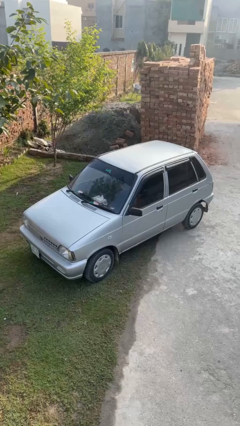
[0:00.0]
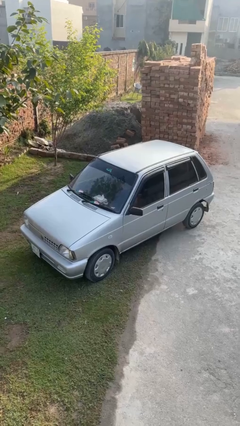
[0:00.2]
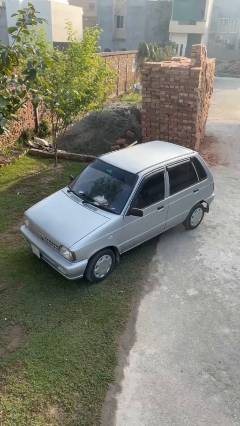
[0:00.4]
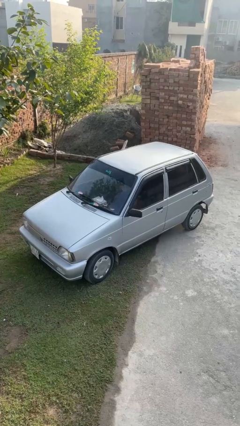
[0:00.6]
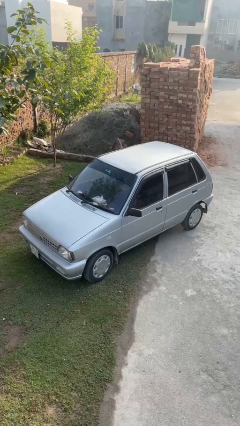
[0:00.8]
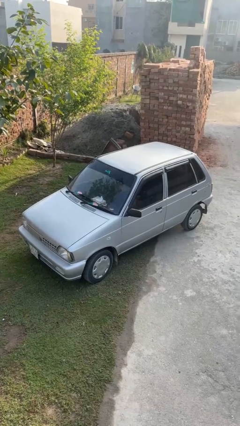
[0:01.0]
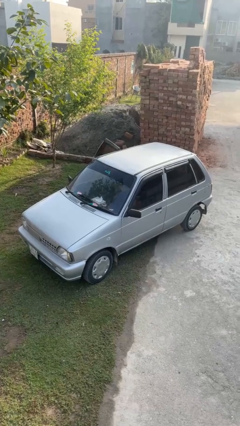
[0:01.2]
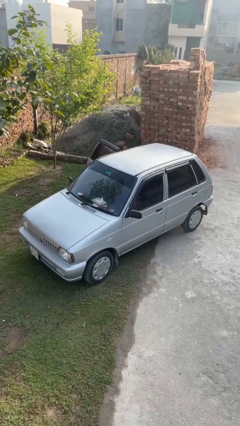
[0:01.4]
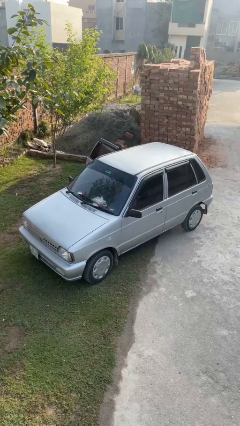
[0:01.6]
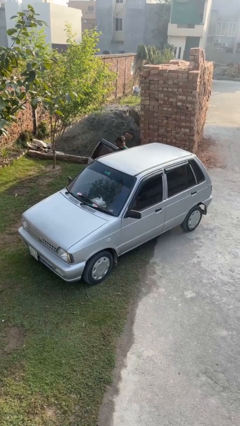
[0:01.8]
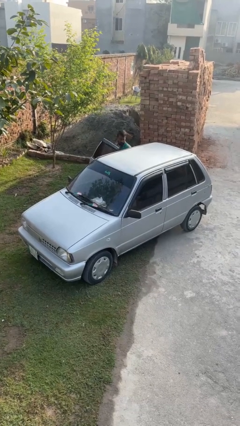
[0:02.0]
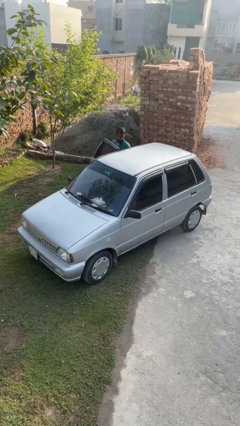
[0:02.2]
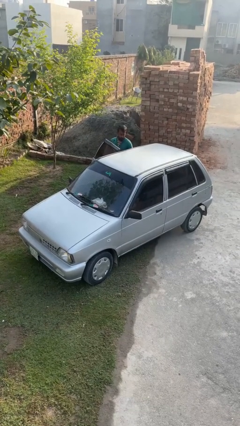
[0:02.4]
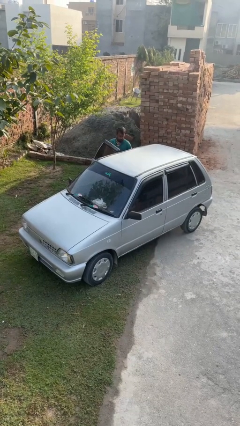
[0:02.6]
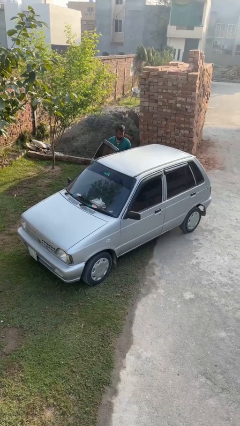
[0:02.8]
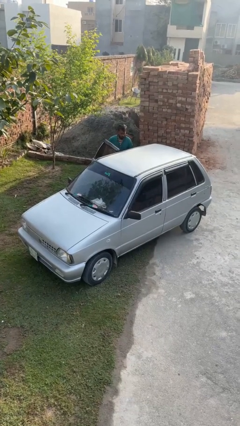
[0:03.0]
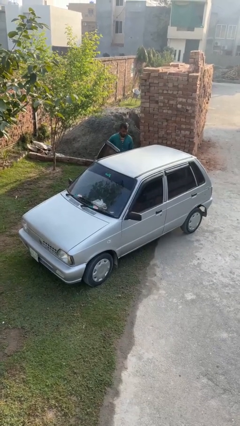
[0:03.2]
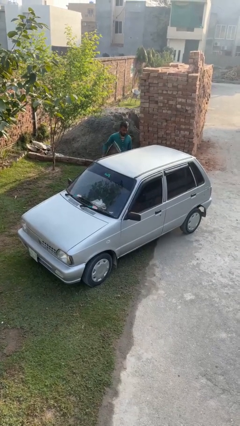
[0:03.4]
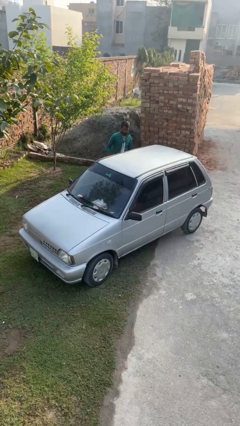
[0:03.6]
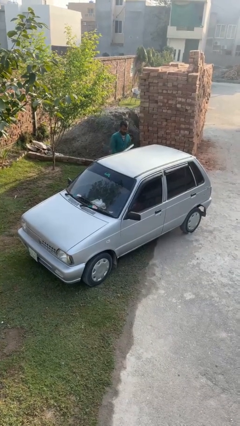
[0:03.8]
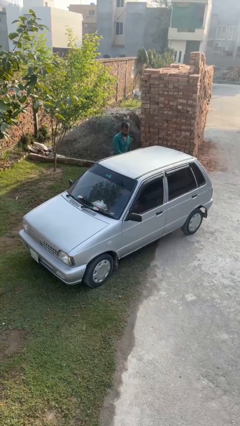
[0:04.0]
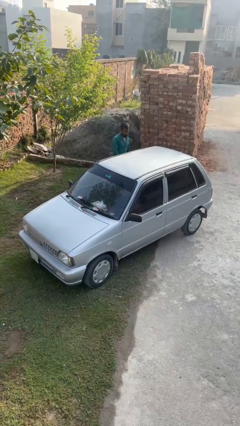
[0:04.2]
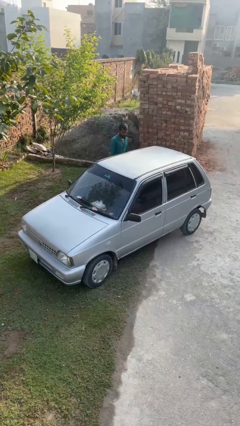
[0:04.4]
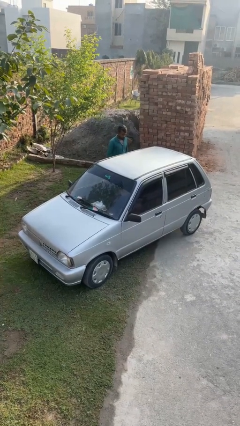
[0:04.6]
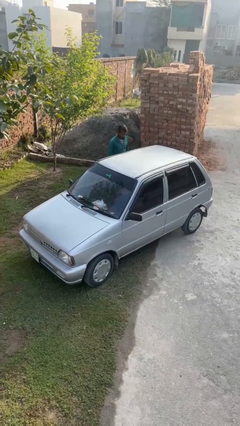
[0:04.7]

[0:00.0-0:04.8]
car drops off person

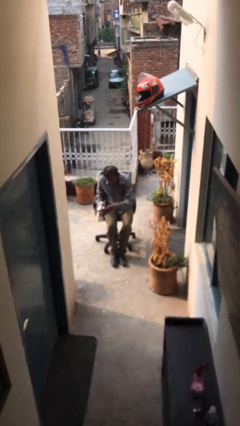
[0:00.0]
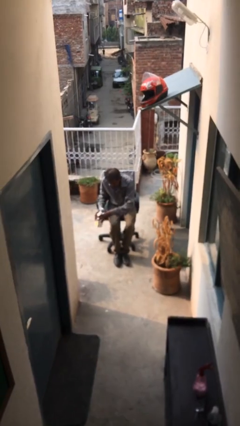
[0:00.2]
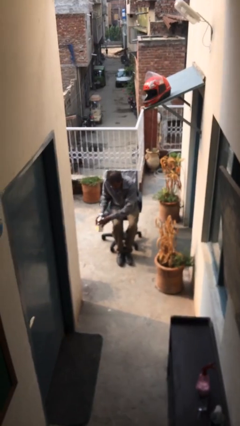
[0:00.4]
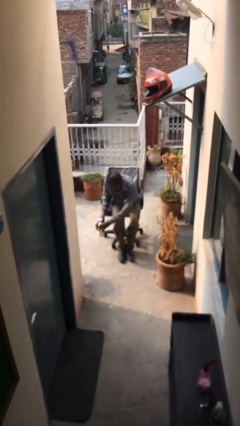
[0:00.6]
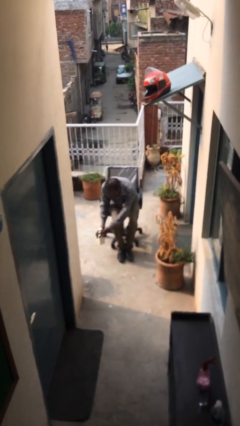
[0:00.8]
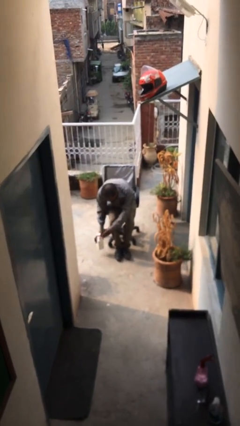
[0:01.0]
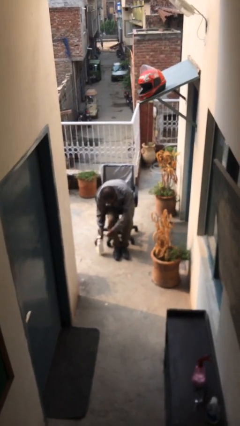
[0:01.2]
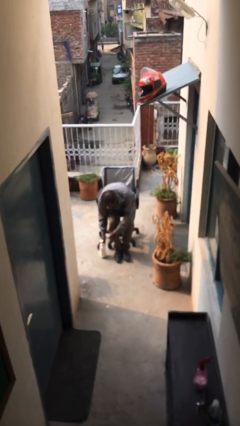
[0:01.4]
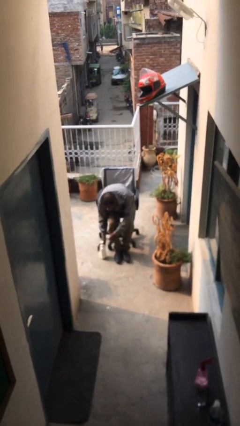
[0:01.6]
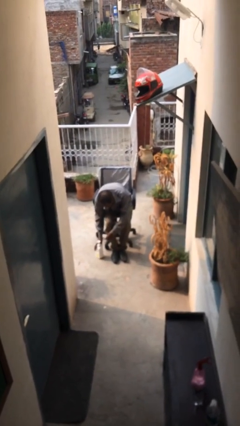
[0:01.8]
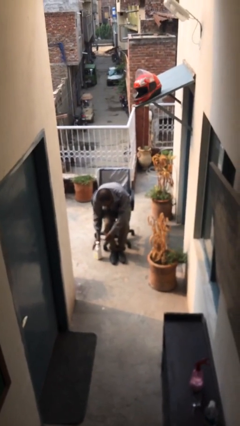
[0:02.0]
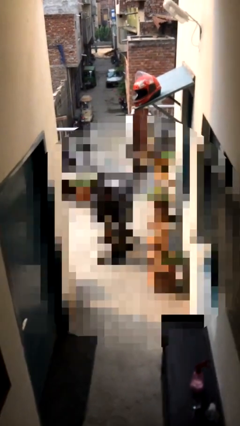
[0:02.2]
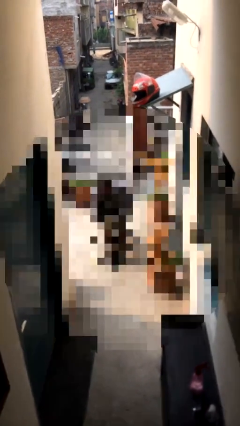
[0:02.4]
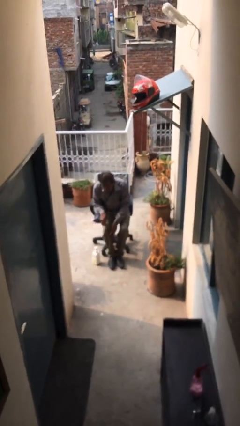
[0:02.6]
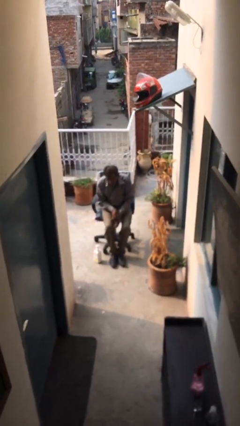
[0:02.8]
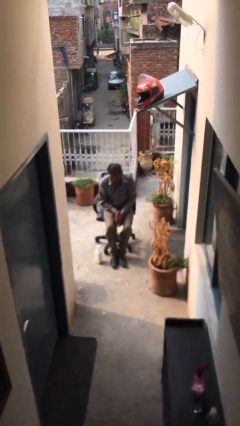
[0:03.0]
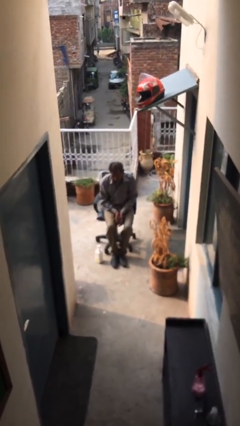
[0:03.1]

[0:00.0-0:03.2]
person puts down object on floor

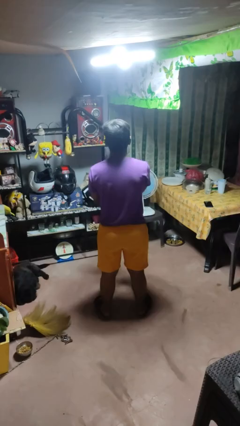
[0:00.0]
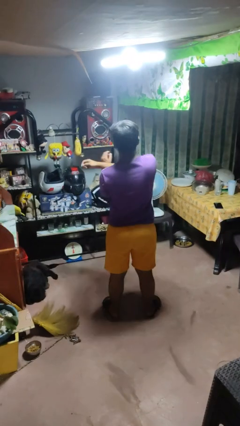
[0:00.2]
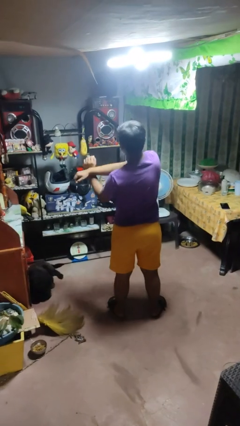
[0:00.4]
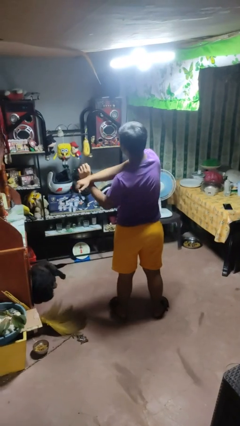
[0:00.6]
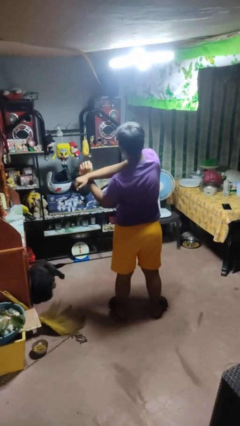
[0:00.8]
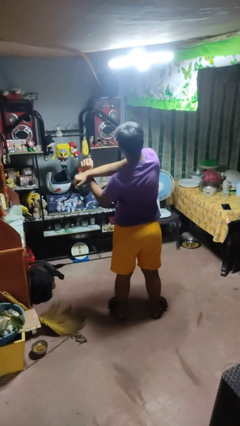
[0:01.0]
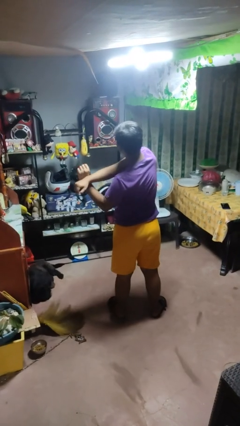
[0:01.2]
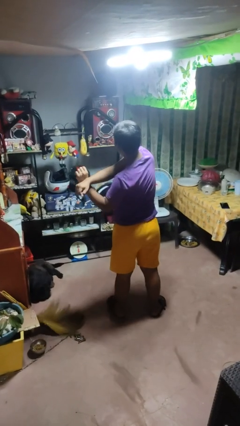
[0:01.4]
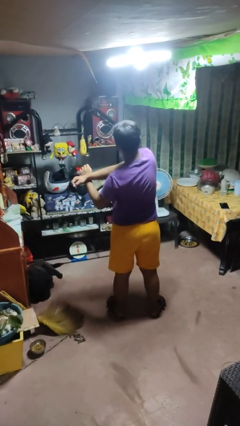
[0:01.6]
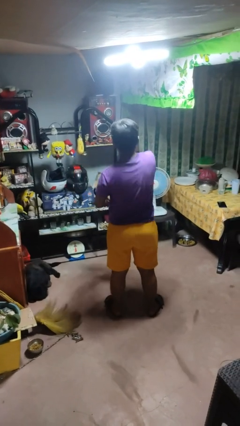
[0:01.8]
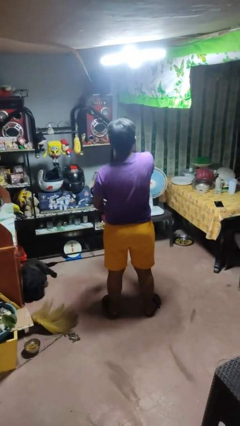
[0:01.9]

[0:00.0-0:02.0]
person crosses arms

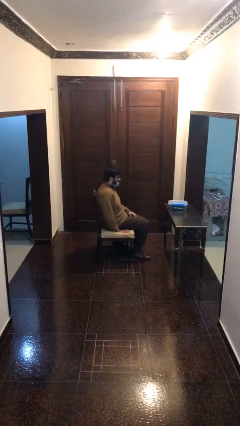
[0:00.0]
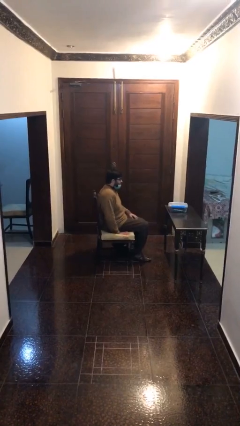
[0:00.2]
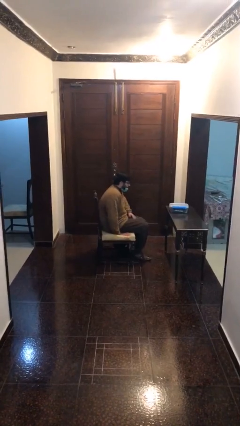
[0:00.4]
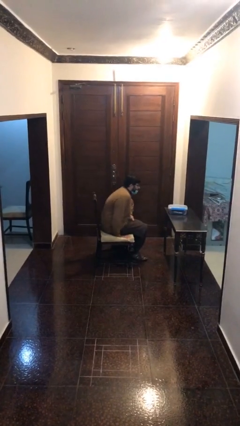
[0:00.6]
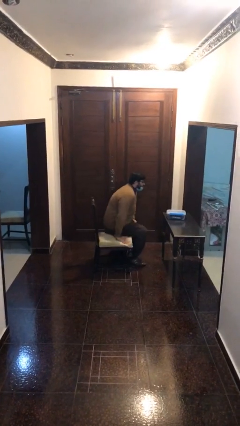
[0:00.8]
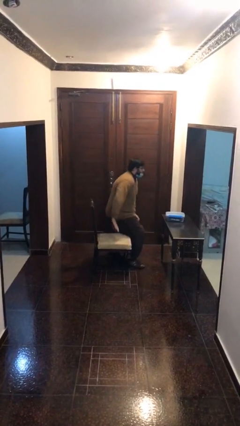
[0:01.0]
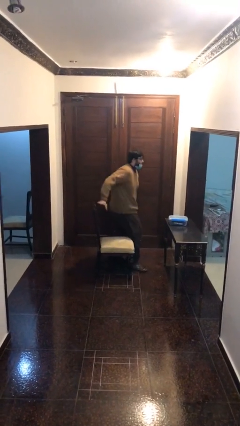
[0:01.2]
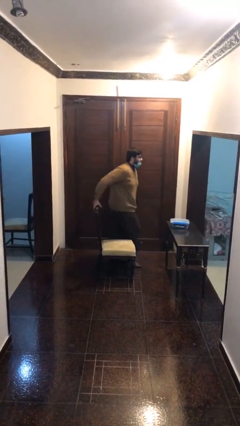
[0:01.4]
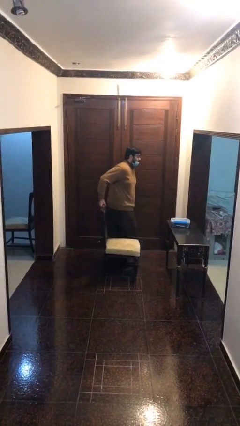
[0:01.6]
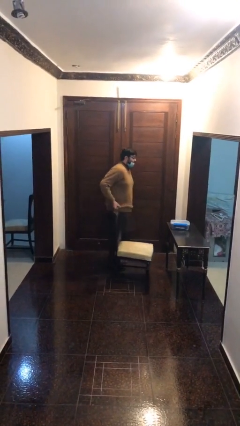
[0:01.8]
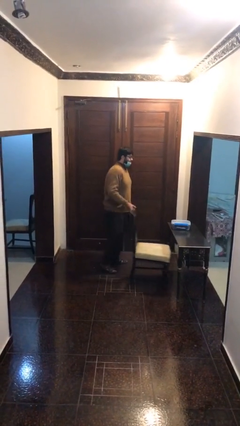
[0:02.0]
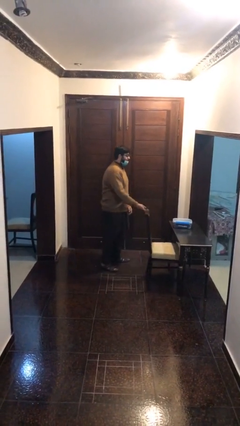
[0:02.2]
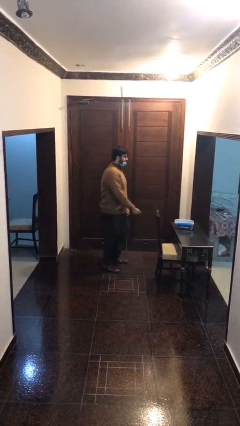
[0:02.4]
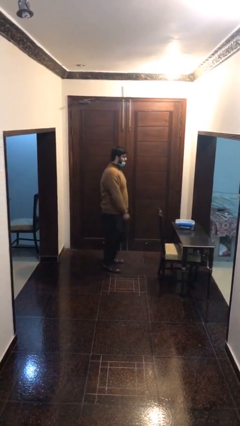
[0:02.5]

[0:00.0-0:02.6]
person stands up

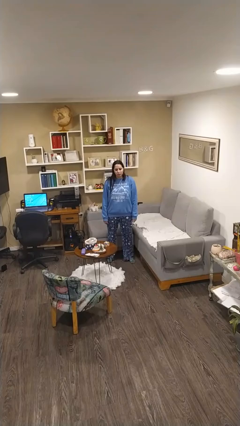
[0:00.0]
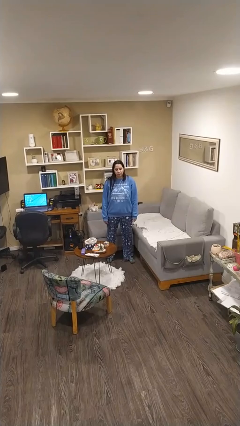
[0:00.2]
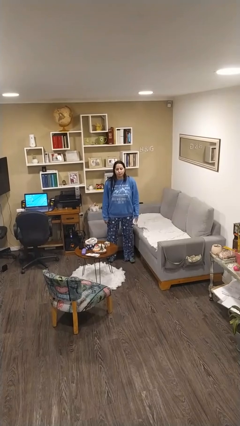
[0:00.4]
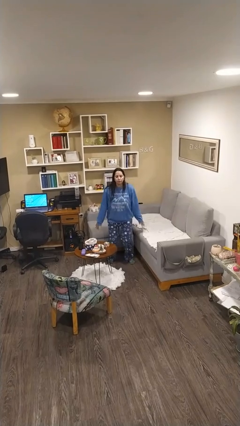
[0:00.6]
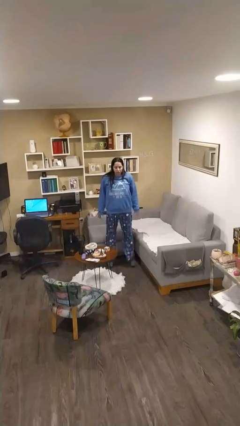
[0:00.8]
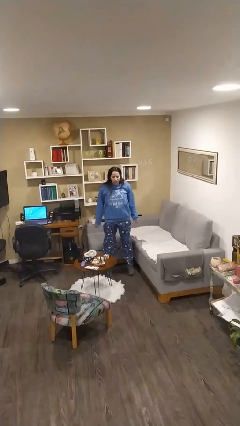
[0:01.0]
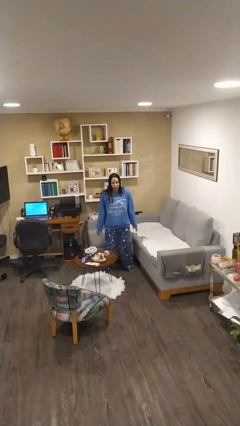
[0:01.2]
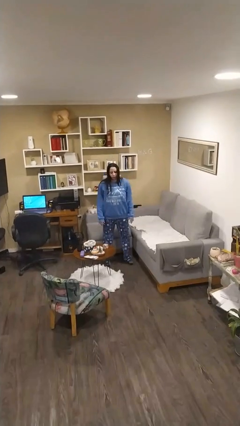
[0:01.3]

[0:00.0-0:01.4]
person jumps

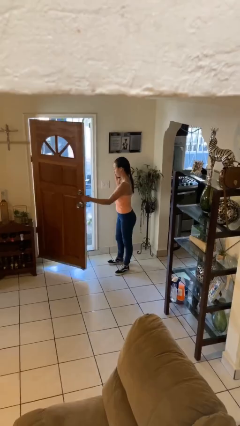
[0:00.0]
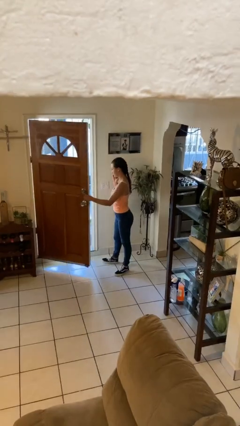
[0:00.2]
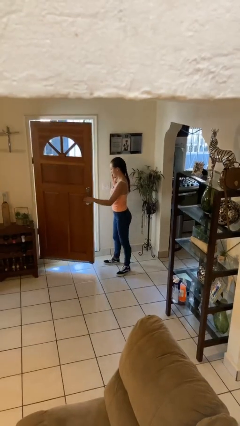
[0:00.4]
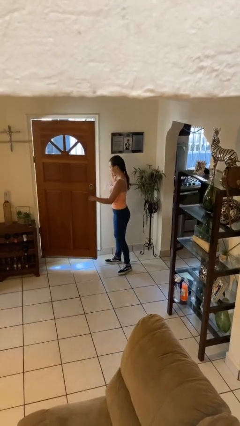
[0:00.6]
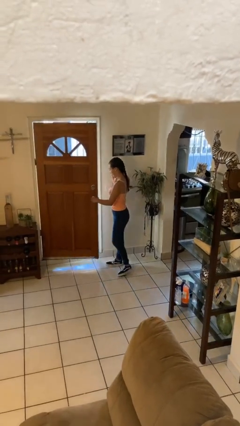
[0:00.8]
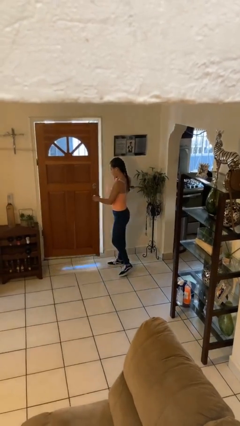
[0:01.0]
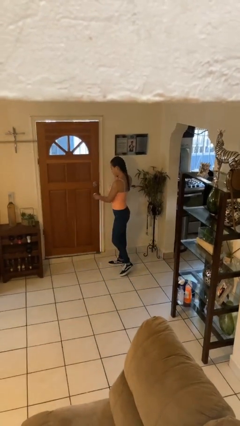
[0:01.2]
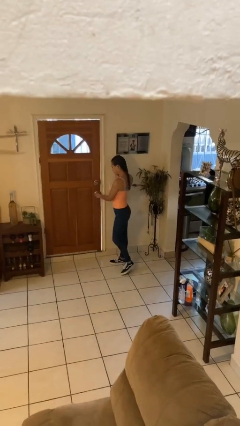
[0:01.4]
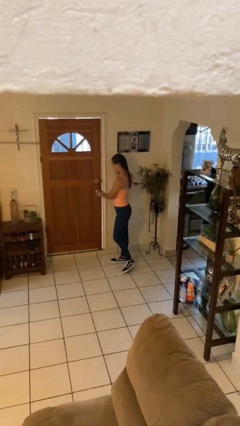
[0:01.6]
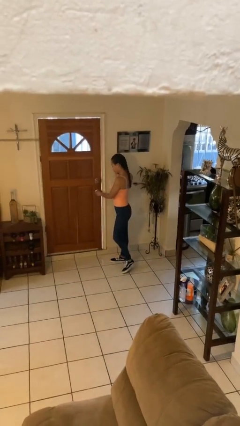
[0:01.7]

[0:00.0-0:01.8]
person closes facility door

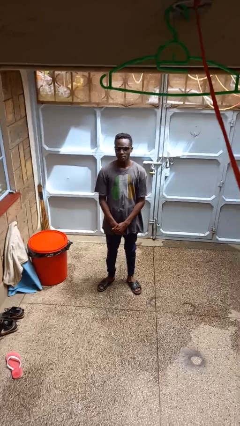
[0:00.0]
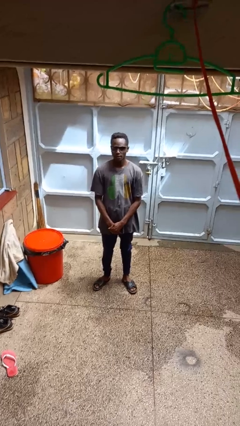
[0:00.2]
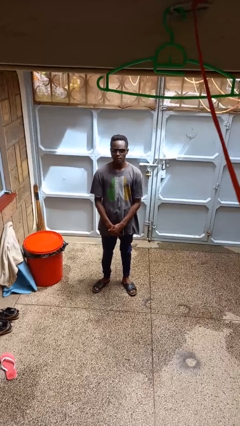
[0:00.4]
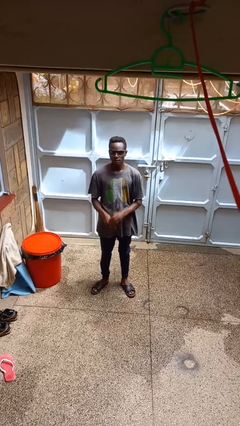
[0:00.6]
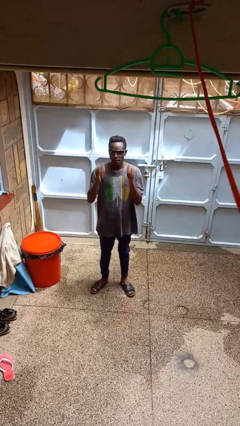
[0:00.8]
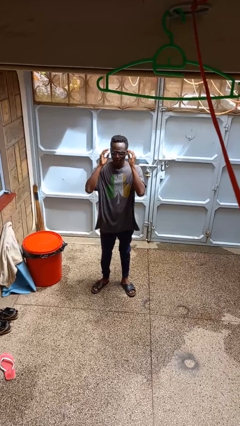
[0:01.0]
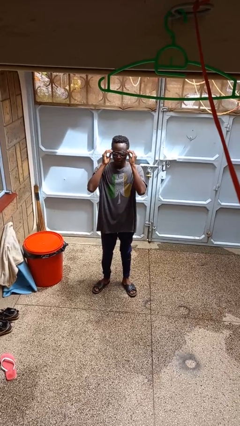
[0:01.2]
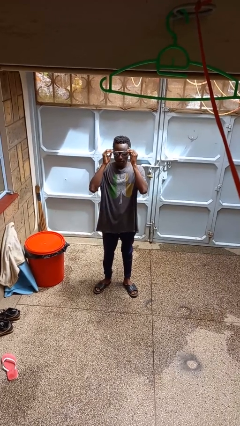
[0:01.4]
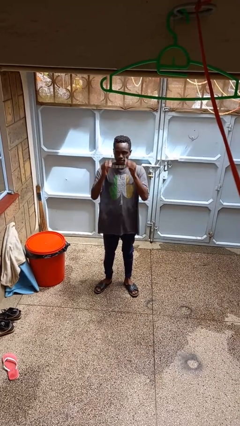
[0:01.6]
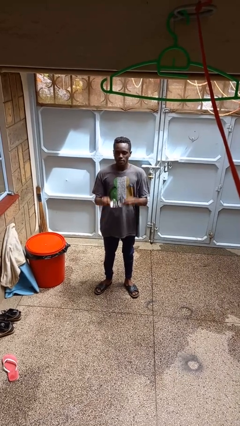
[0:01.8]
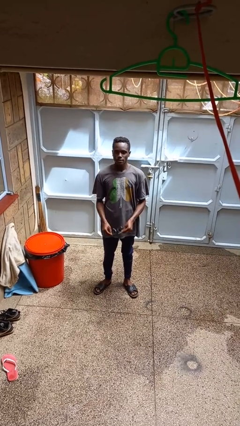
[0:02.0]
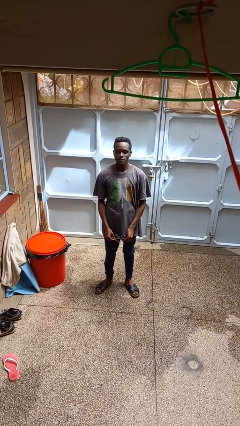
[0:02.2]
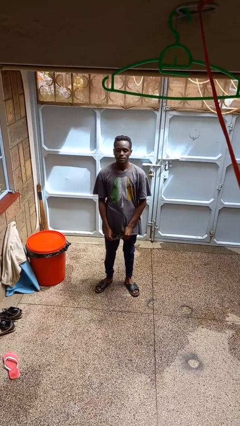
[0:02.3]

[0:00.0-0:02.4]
person takes off sunglasses
